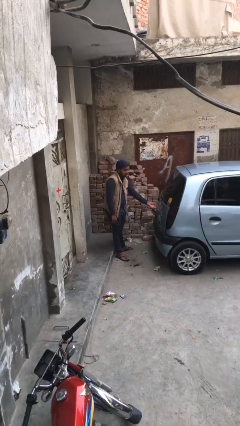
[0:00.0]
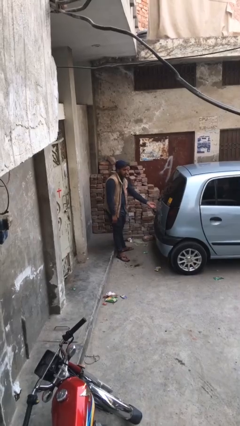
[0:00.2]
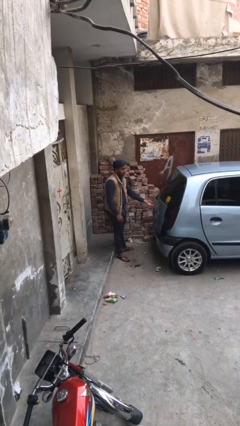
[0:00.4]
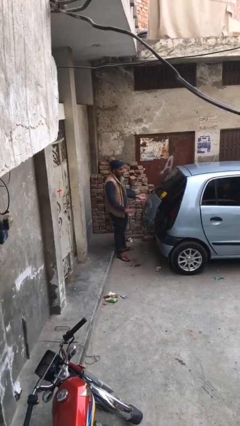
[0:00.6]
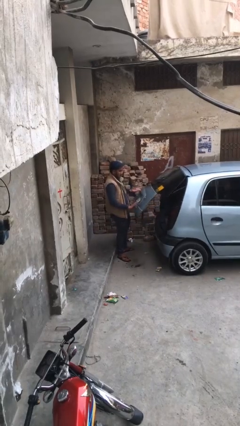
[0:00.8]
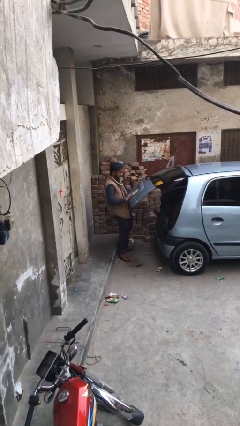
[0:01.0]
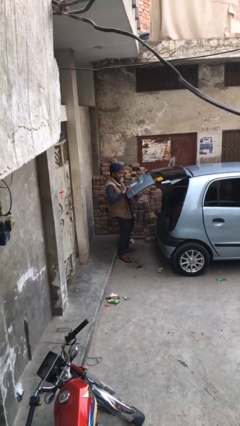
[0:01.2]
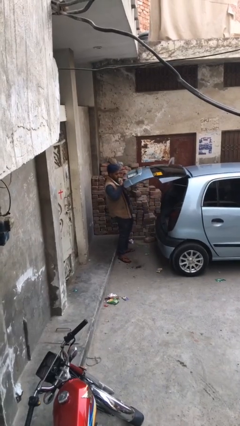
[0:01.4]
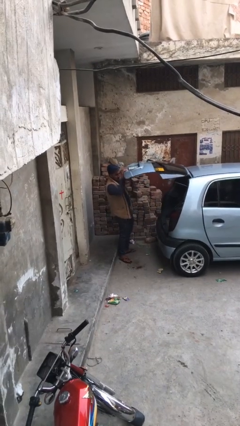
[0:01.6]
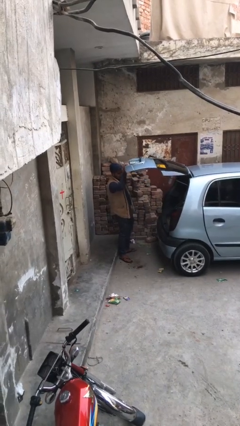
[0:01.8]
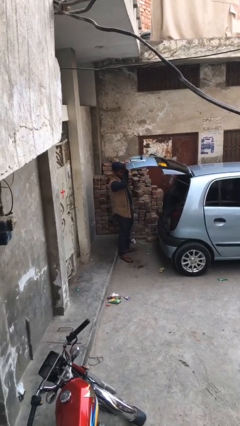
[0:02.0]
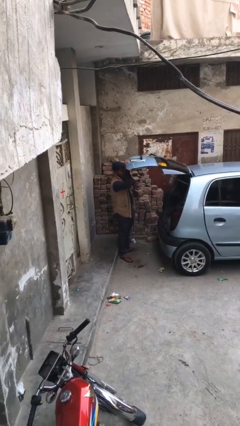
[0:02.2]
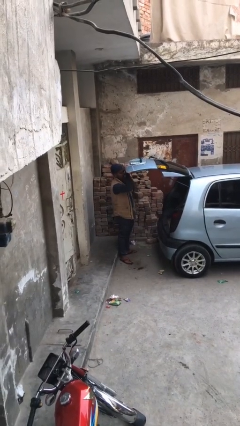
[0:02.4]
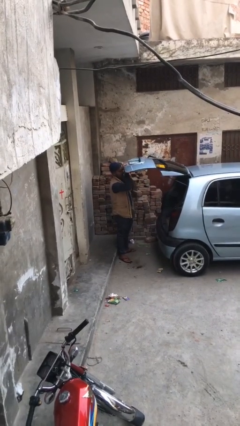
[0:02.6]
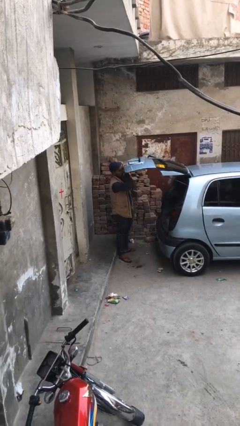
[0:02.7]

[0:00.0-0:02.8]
person opens car trunk

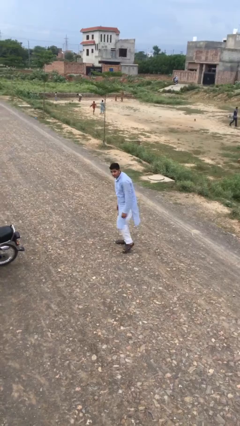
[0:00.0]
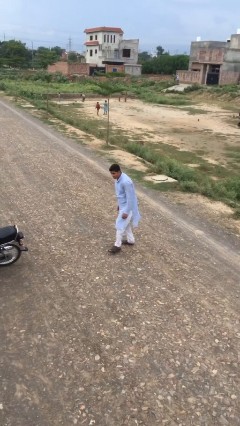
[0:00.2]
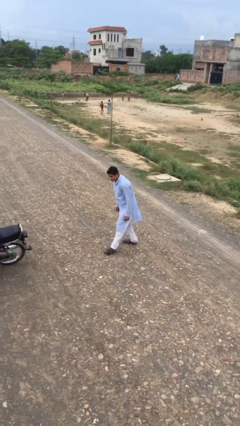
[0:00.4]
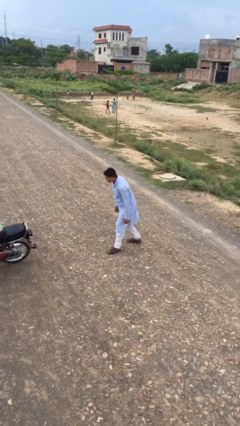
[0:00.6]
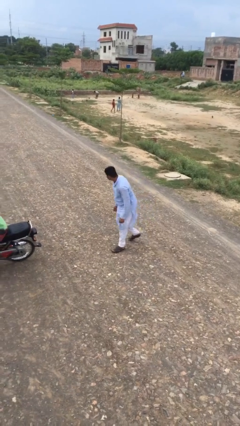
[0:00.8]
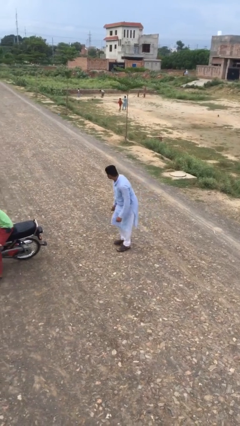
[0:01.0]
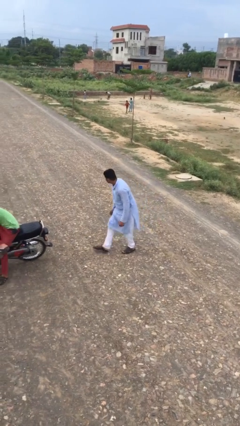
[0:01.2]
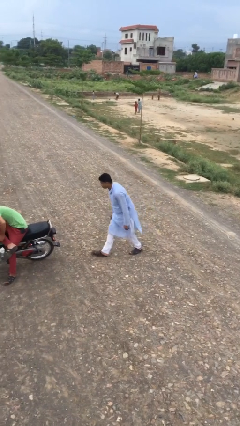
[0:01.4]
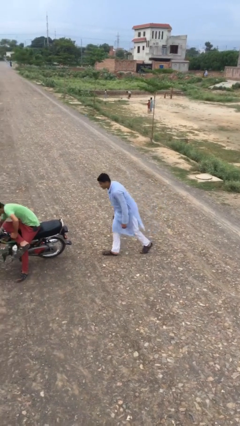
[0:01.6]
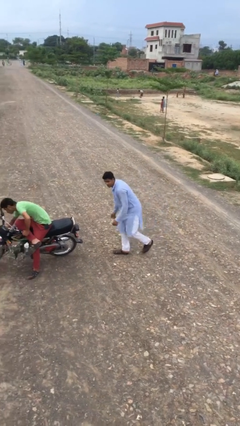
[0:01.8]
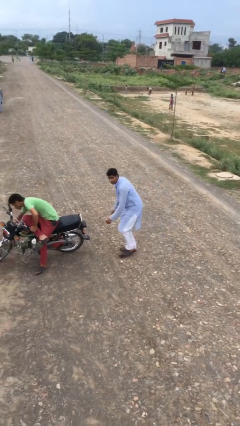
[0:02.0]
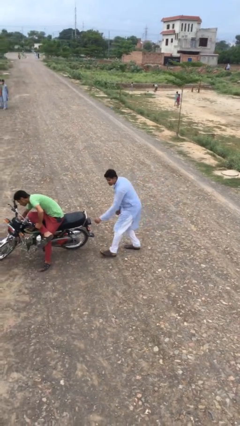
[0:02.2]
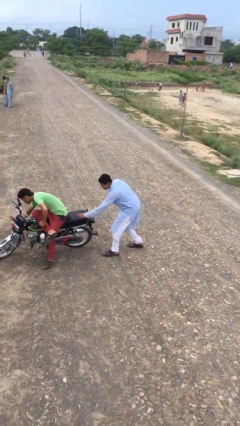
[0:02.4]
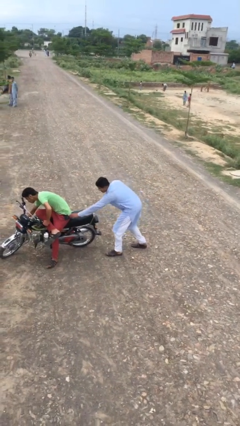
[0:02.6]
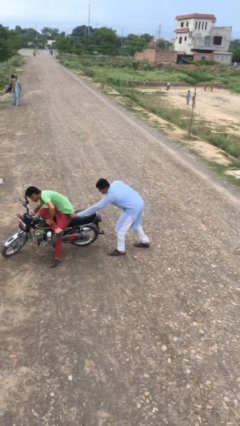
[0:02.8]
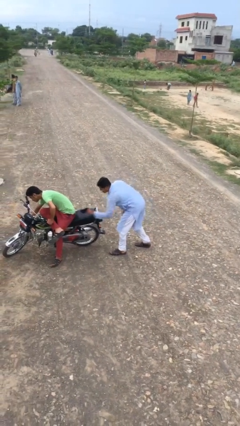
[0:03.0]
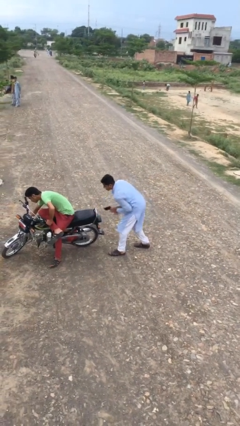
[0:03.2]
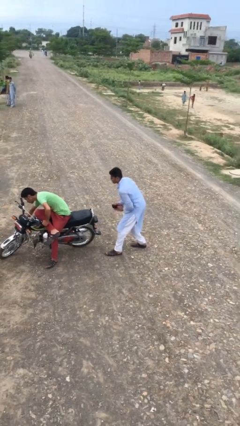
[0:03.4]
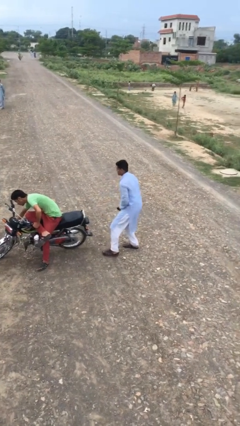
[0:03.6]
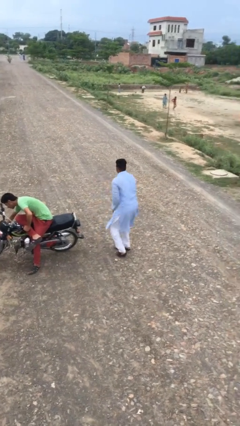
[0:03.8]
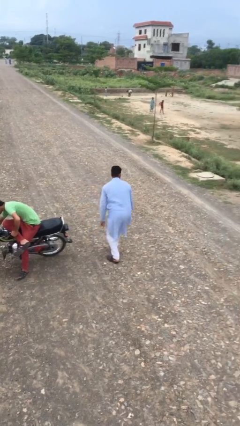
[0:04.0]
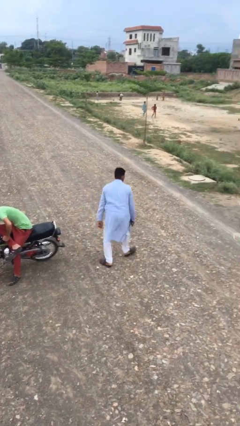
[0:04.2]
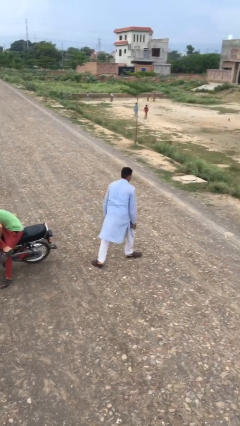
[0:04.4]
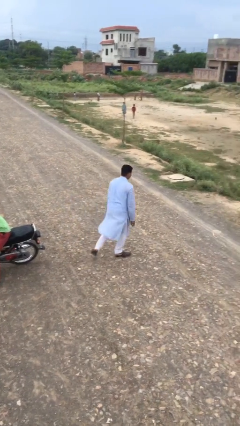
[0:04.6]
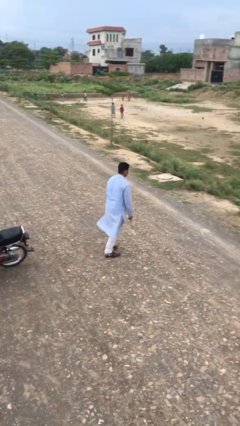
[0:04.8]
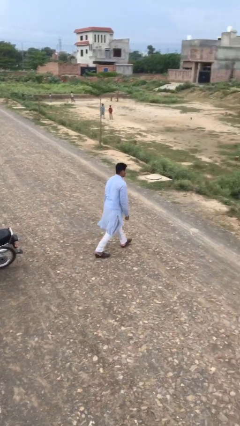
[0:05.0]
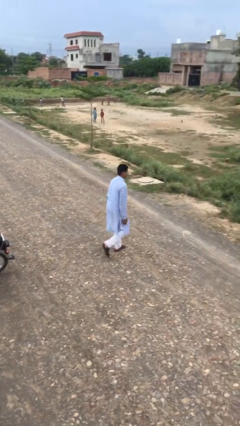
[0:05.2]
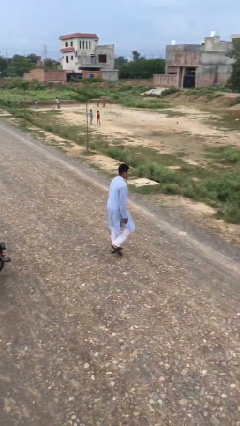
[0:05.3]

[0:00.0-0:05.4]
person steals object from person

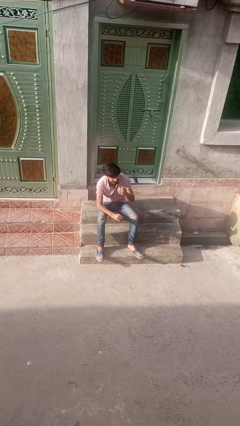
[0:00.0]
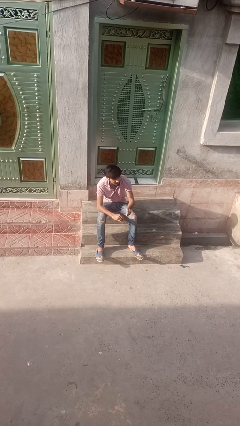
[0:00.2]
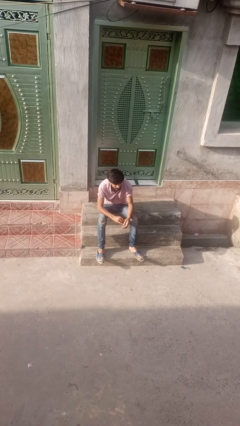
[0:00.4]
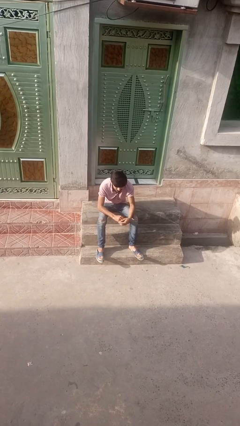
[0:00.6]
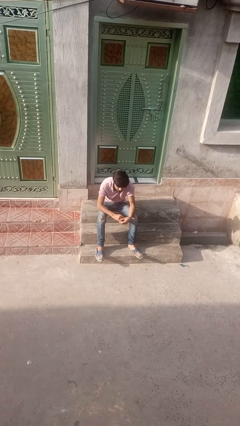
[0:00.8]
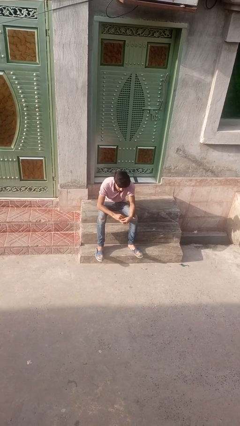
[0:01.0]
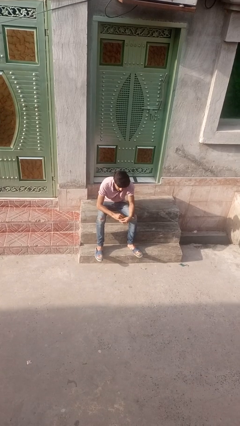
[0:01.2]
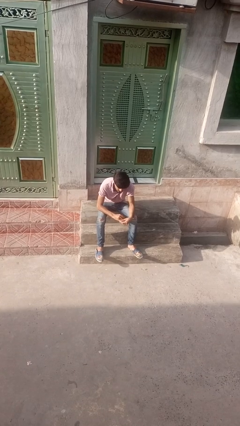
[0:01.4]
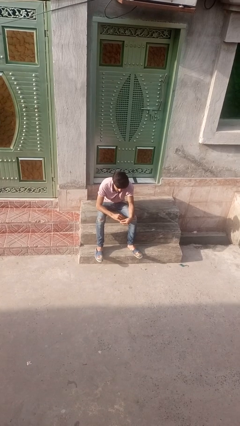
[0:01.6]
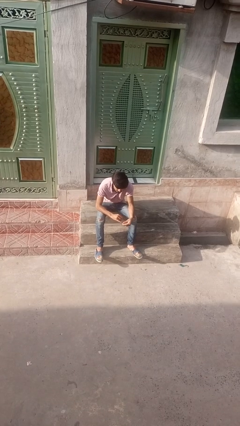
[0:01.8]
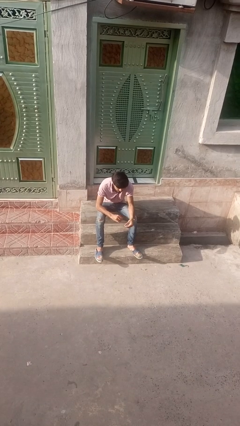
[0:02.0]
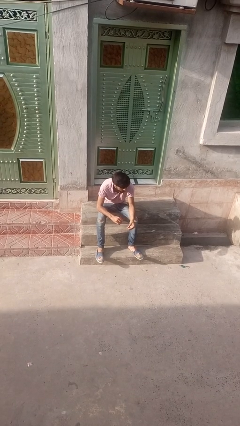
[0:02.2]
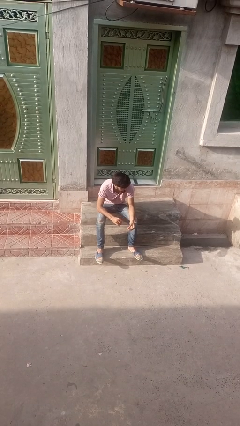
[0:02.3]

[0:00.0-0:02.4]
person takes off ring

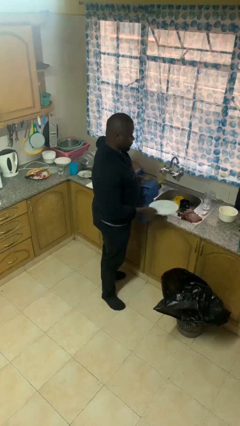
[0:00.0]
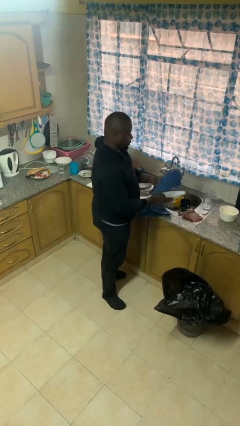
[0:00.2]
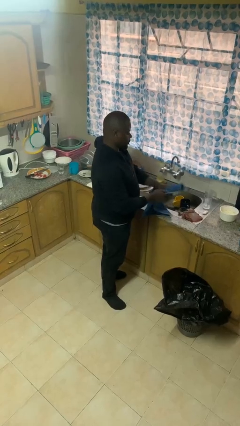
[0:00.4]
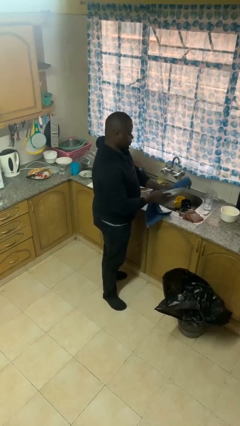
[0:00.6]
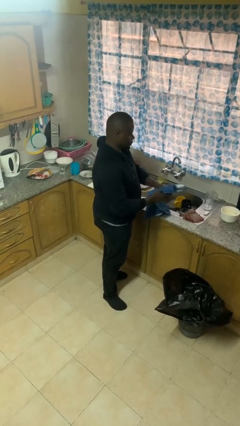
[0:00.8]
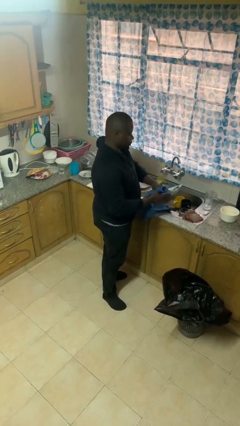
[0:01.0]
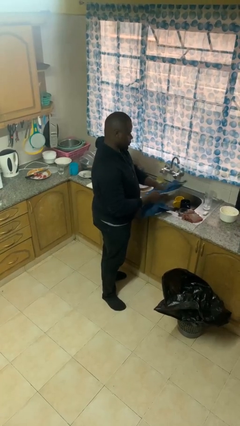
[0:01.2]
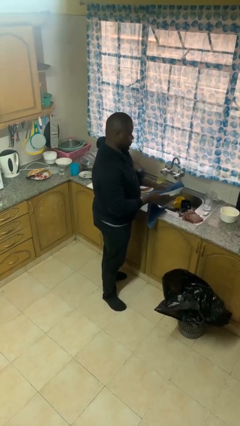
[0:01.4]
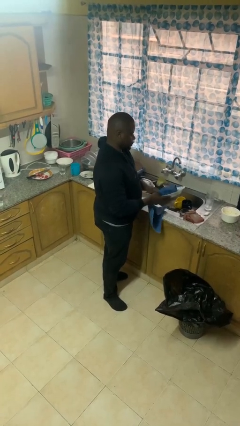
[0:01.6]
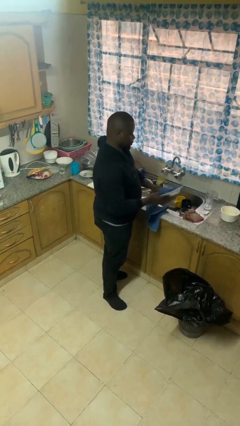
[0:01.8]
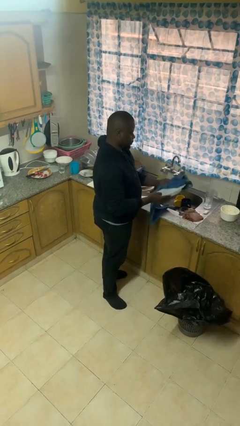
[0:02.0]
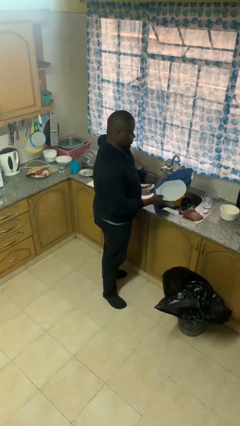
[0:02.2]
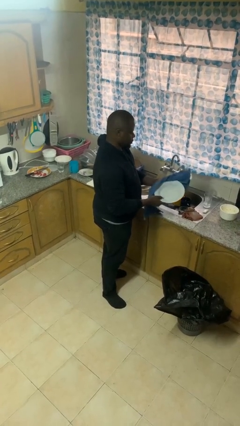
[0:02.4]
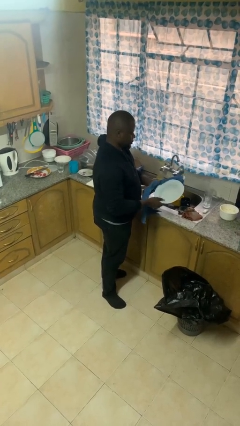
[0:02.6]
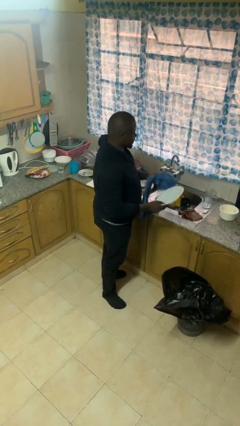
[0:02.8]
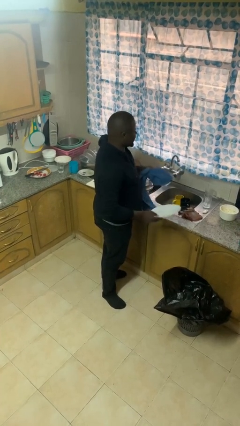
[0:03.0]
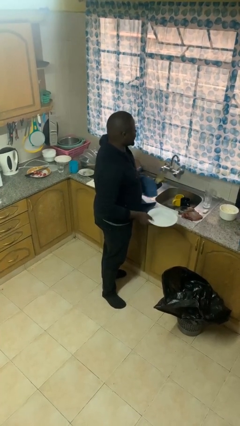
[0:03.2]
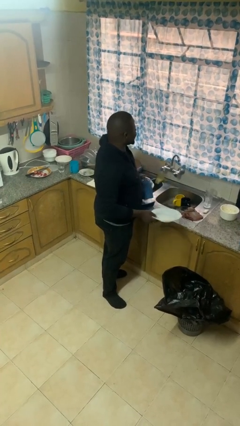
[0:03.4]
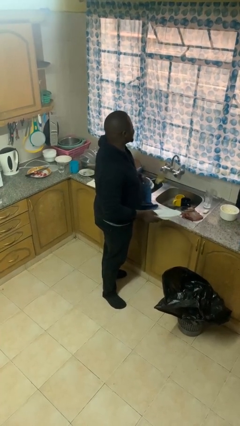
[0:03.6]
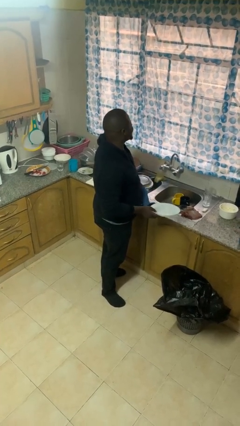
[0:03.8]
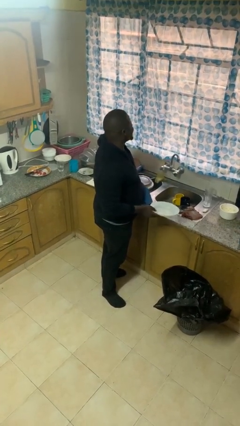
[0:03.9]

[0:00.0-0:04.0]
person dries dish

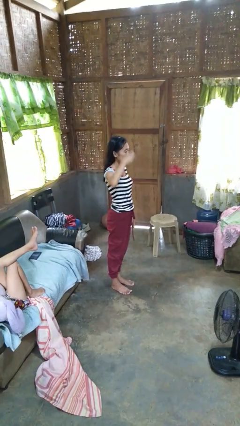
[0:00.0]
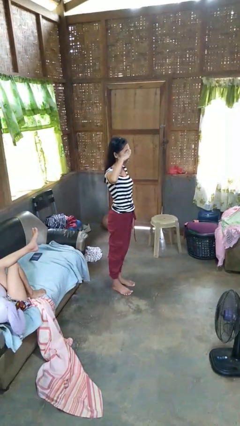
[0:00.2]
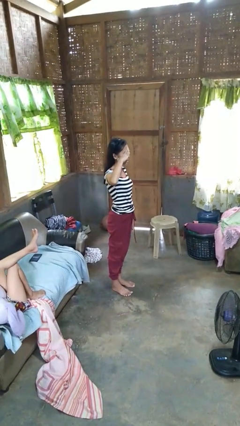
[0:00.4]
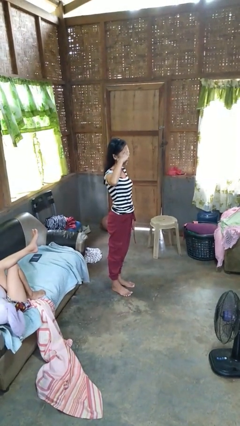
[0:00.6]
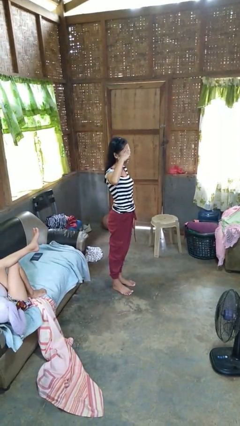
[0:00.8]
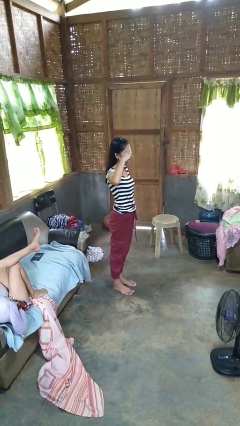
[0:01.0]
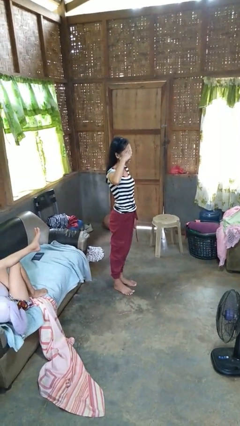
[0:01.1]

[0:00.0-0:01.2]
person salutes

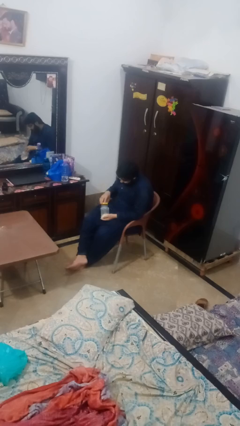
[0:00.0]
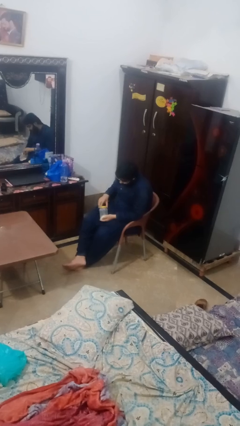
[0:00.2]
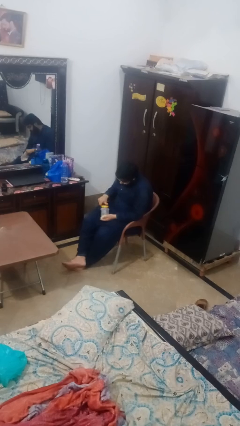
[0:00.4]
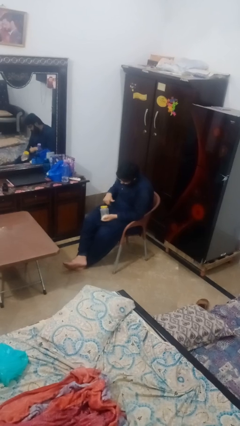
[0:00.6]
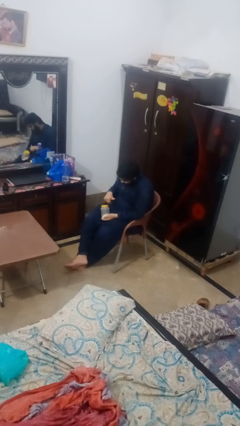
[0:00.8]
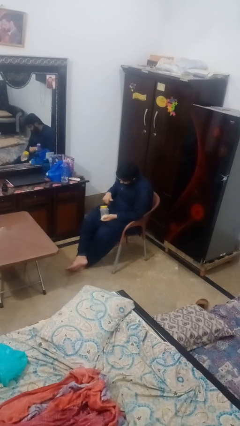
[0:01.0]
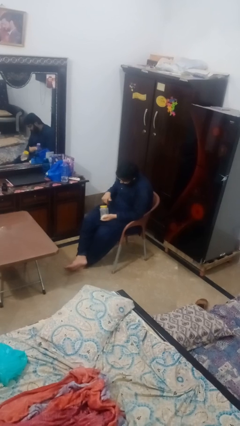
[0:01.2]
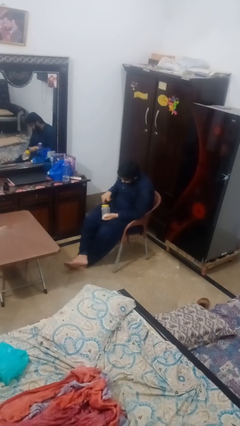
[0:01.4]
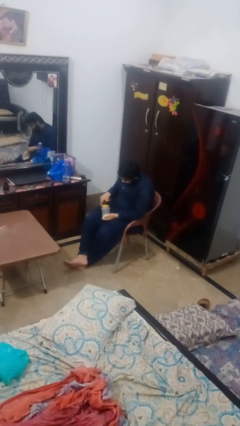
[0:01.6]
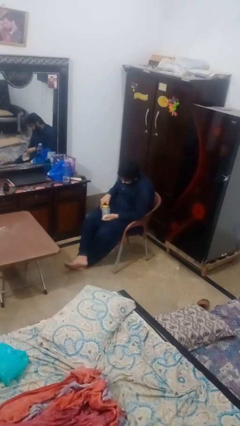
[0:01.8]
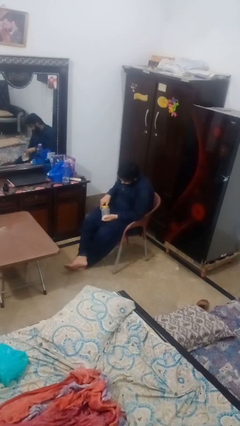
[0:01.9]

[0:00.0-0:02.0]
person closes jar
